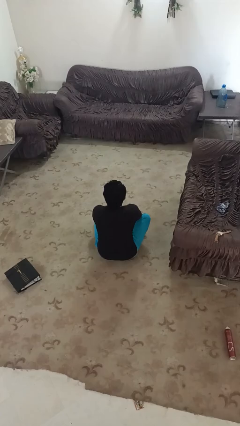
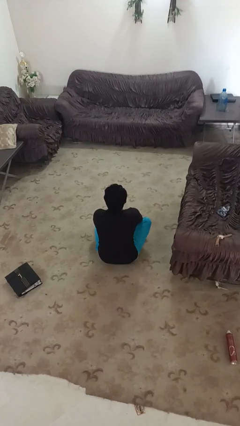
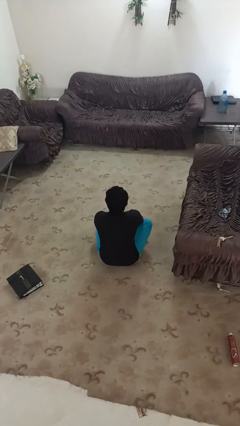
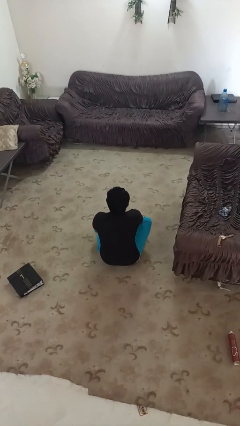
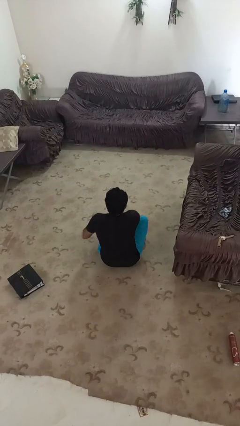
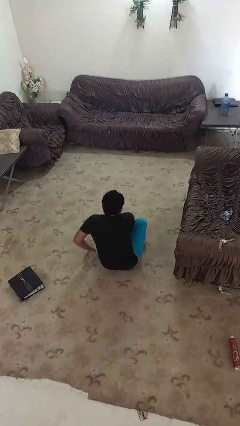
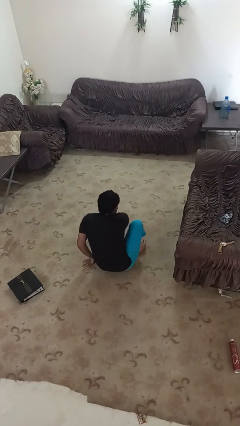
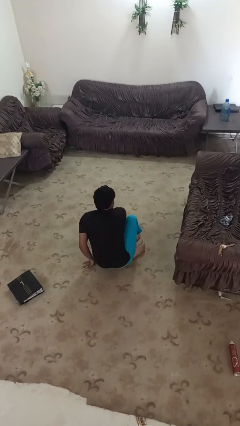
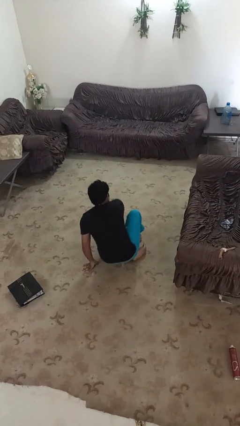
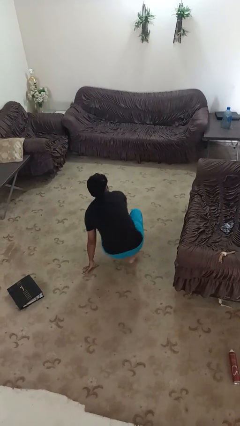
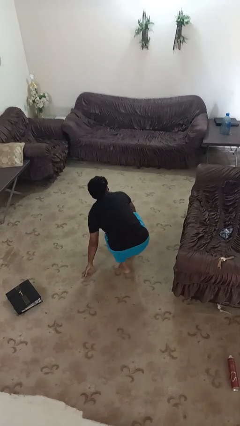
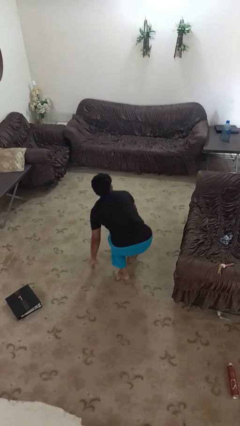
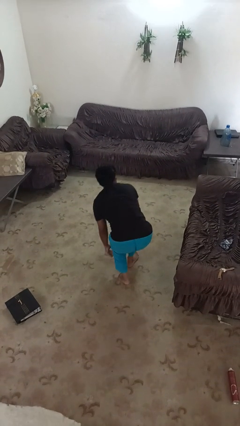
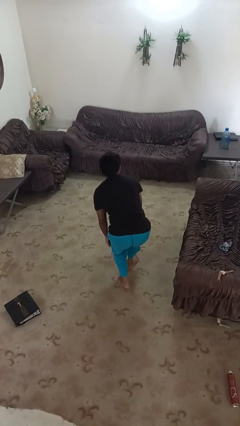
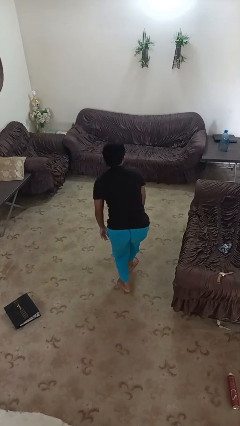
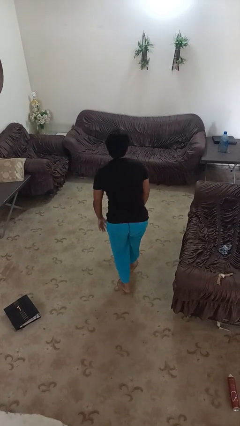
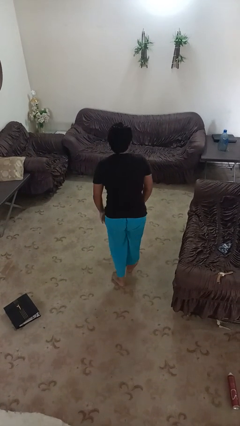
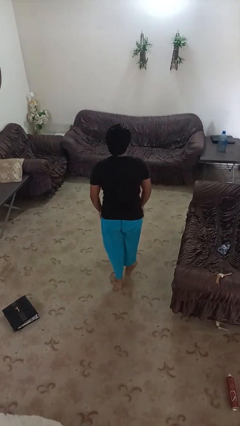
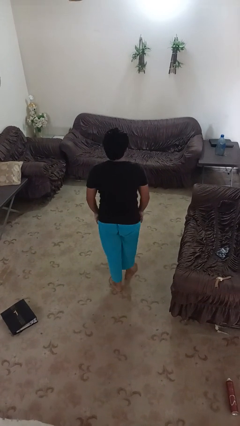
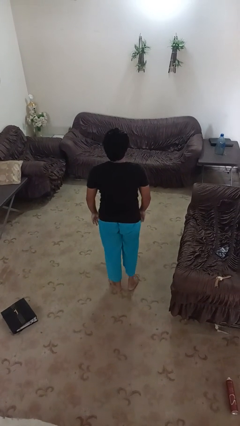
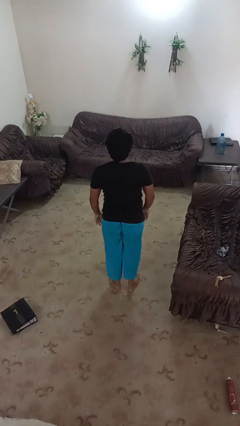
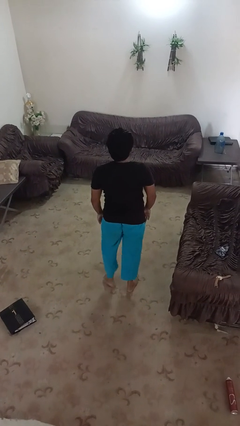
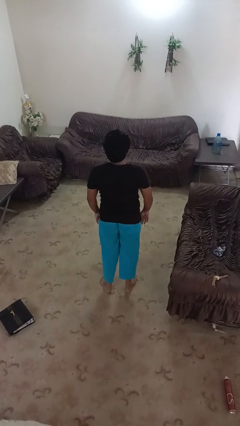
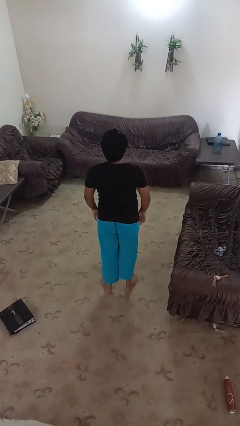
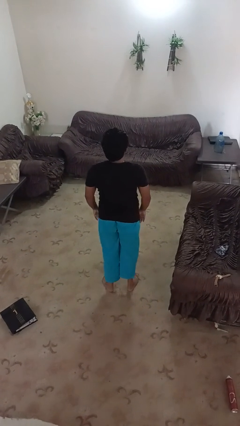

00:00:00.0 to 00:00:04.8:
person stands up from floor

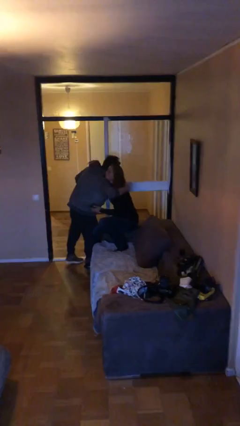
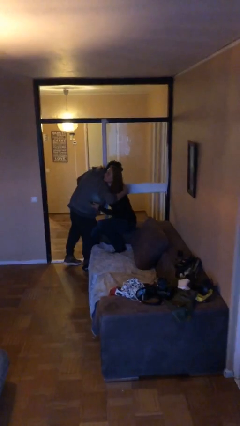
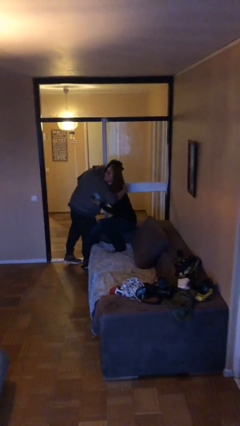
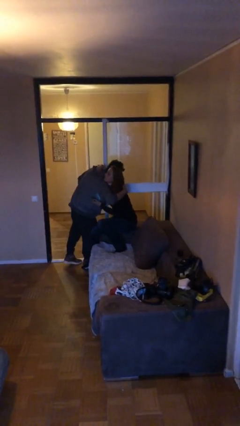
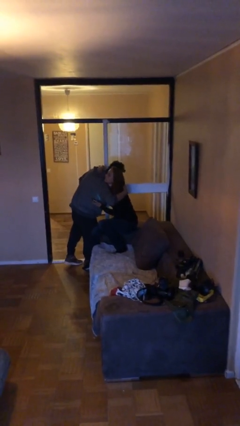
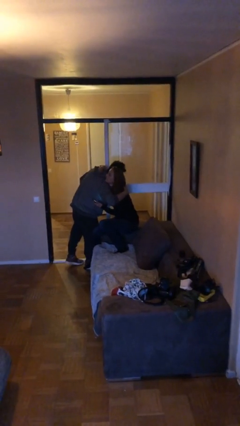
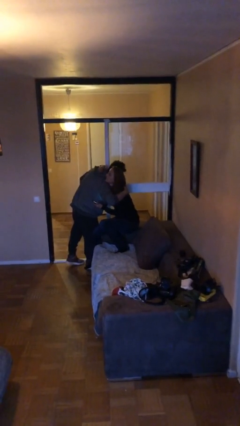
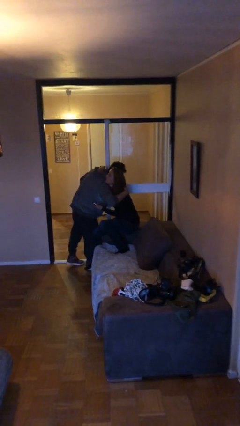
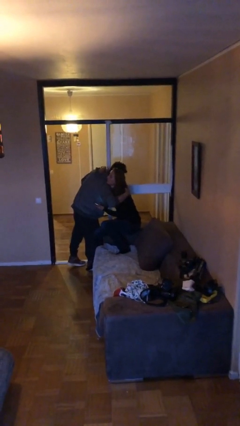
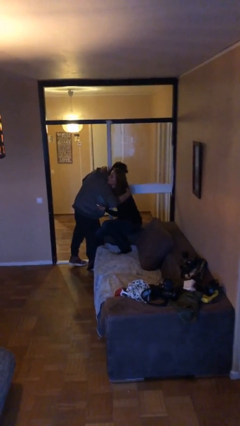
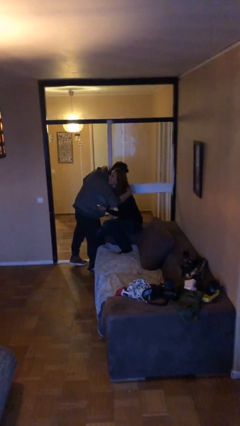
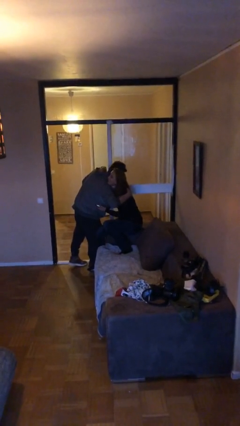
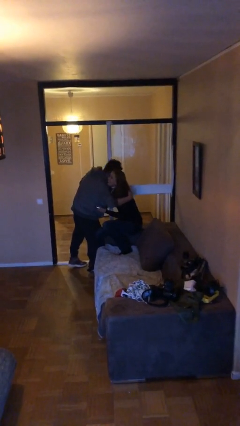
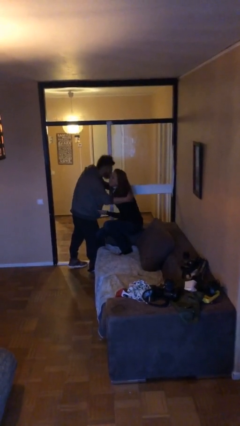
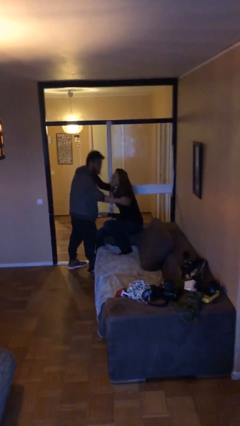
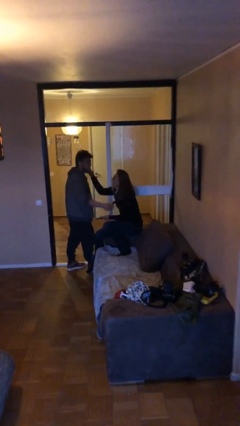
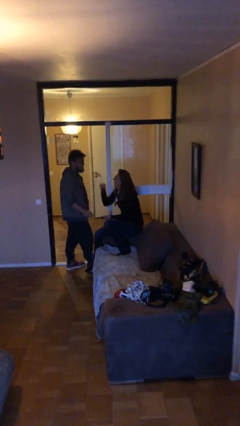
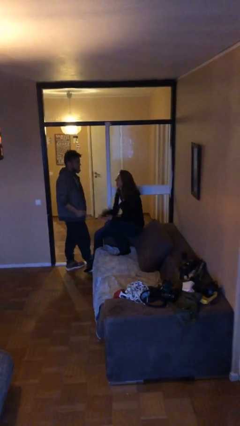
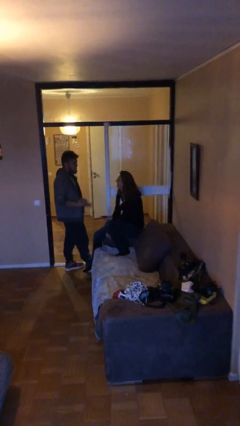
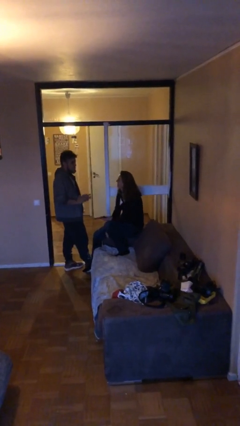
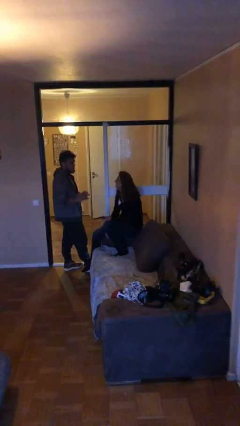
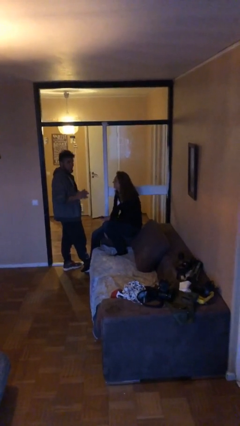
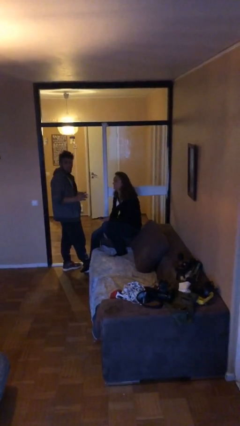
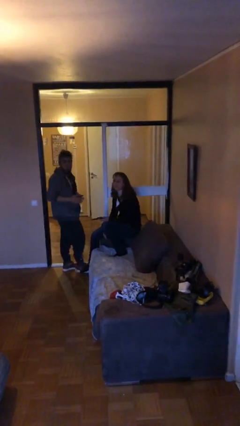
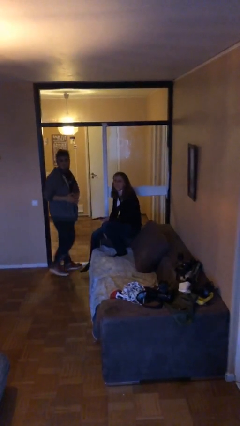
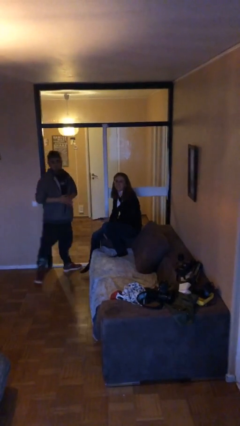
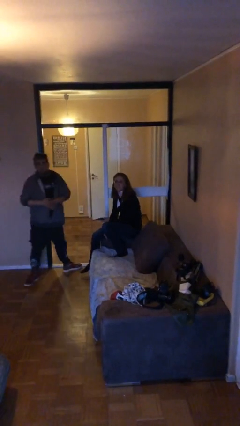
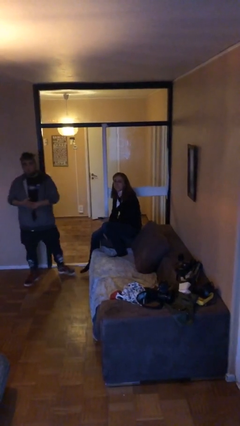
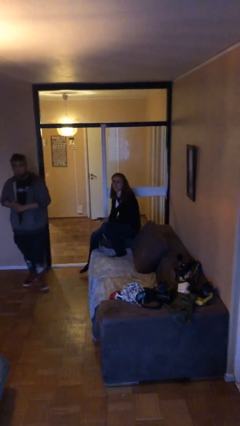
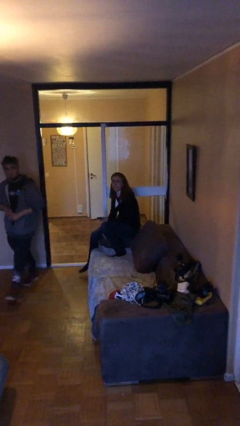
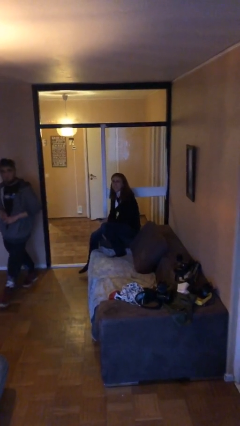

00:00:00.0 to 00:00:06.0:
person embraces person

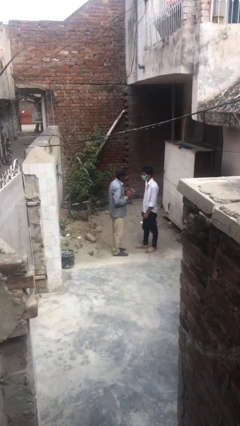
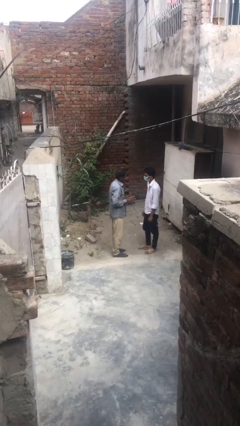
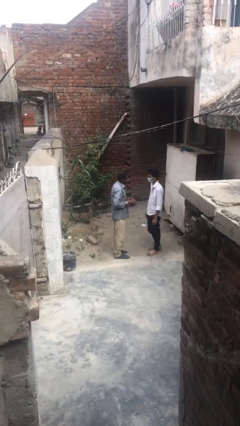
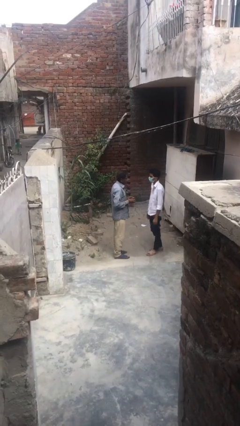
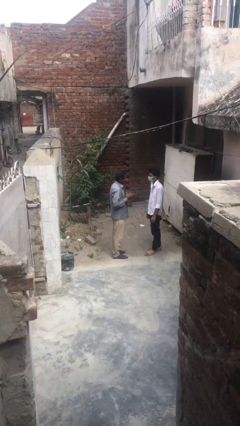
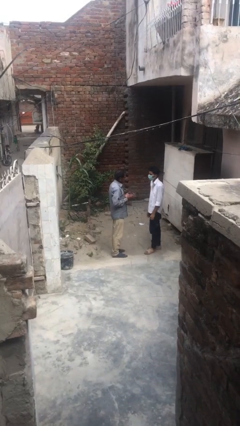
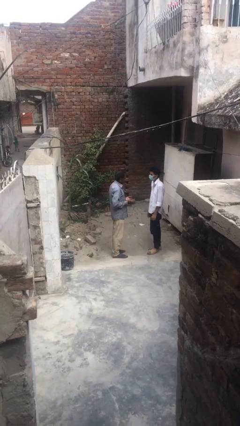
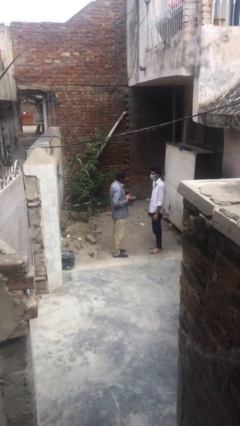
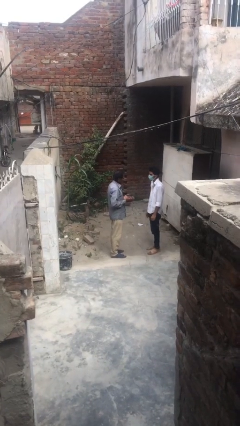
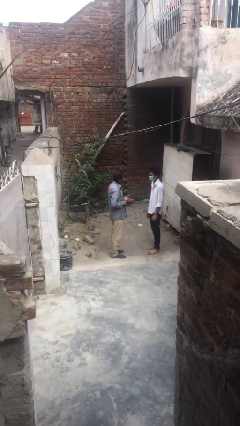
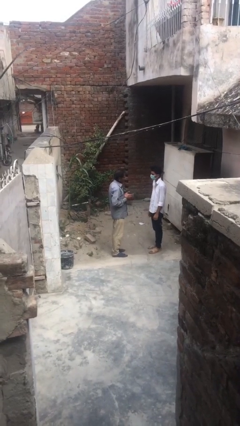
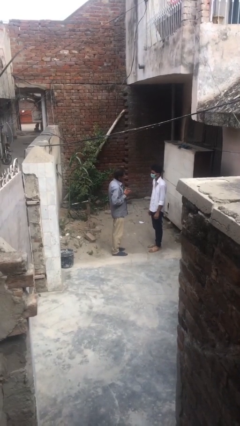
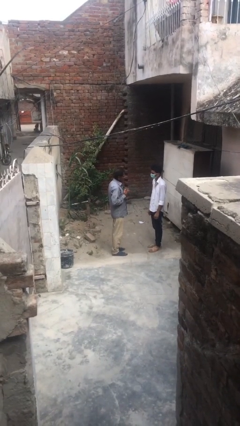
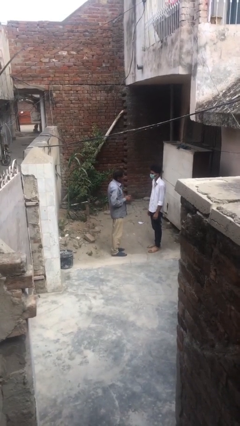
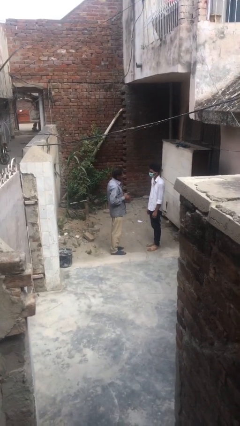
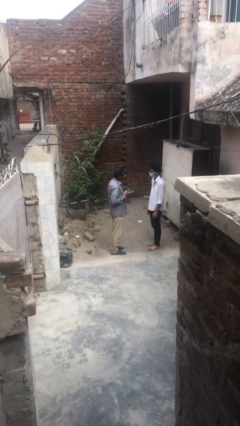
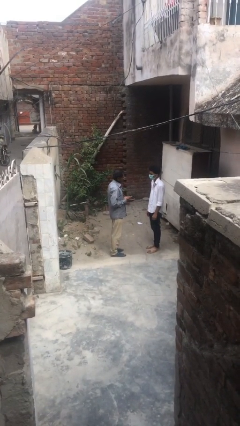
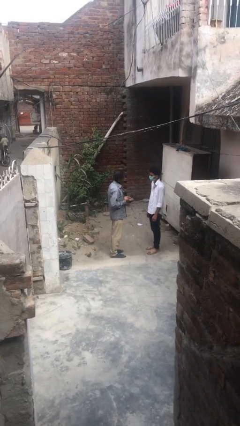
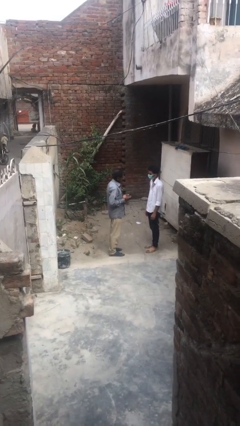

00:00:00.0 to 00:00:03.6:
person talks to person

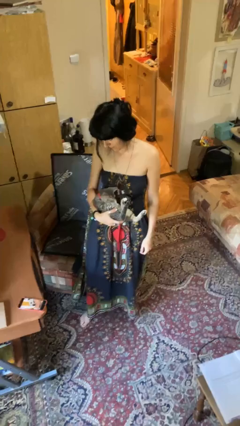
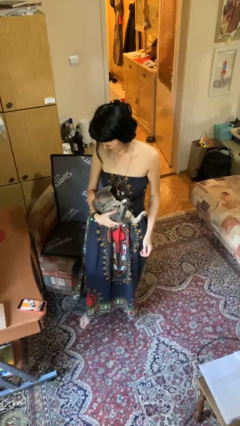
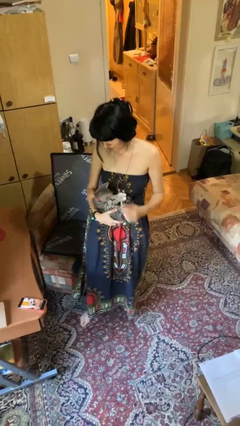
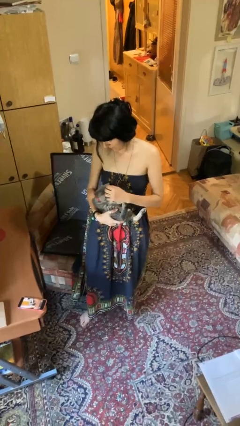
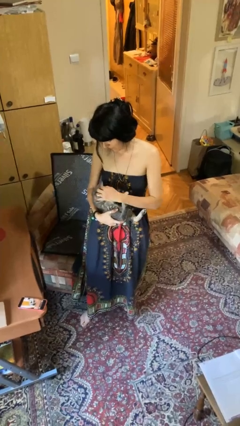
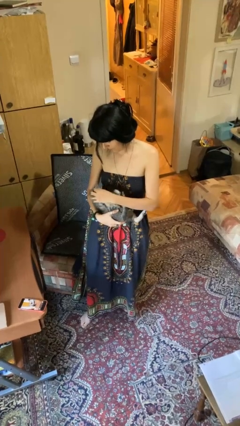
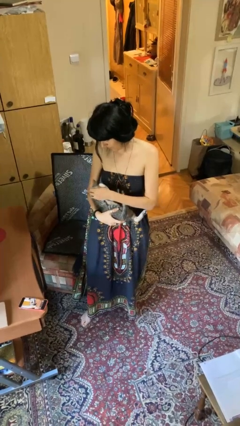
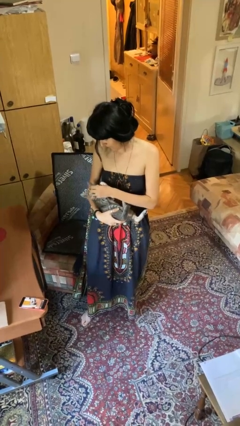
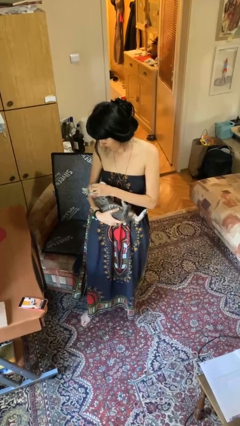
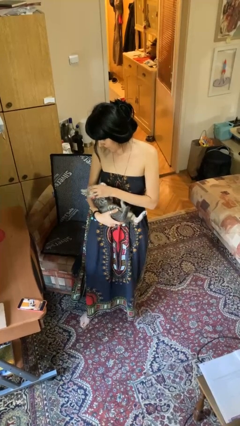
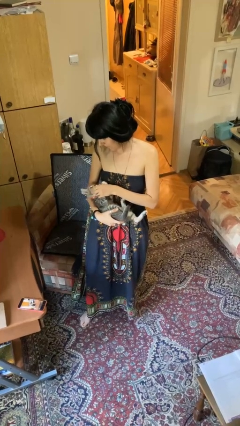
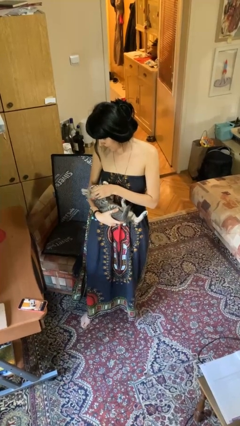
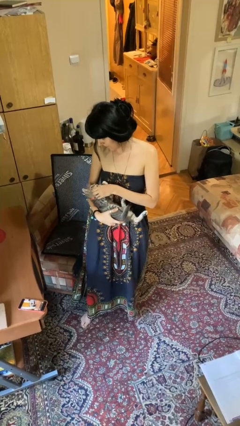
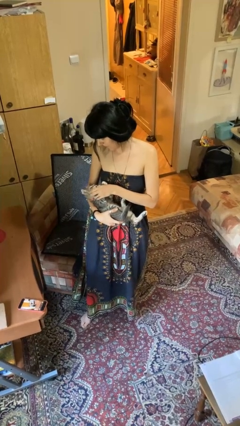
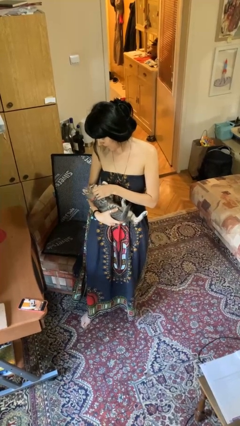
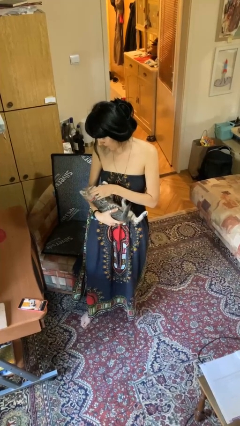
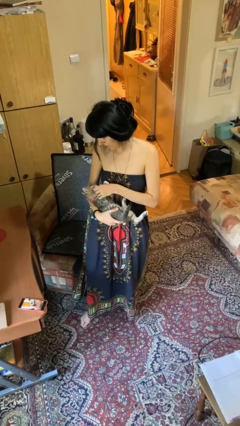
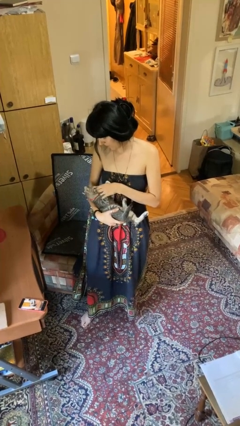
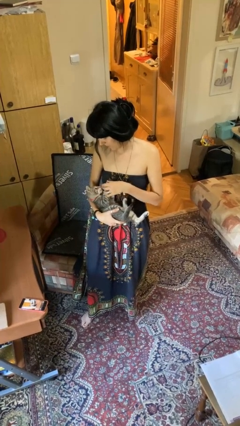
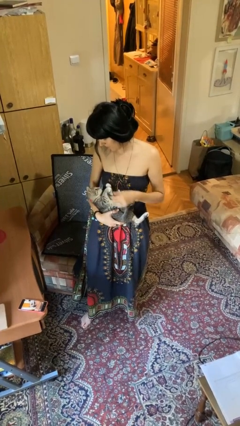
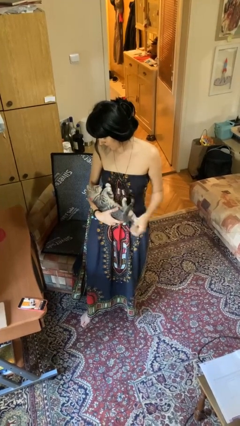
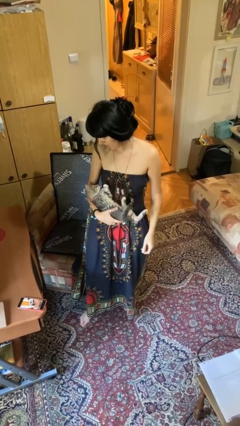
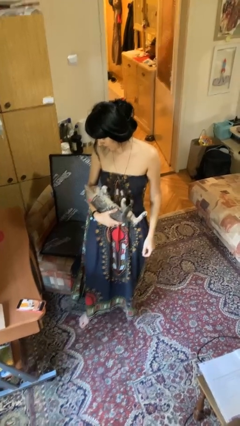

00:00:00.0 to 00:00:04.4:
person pets cat
